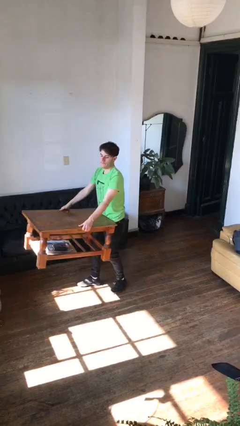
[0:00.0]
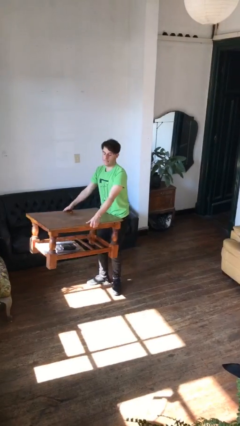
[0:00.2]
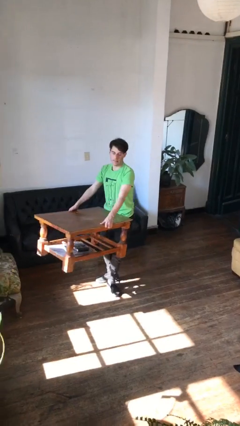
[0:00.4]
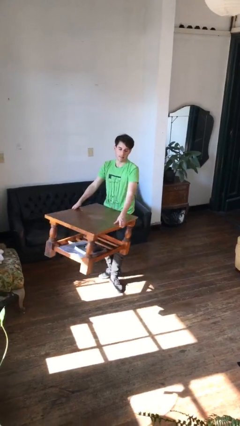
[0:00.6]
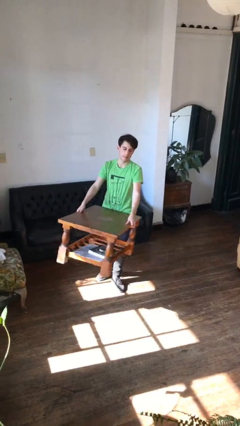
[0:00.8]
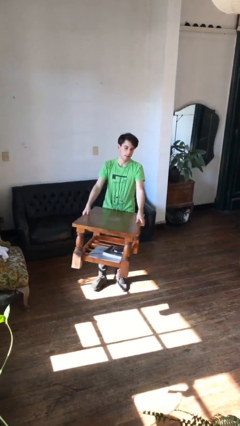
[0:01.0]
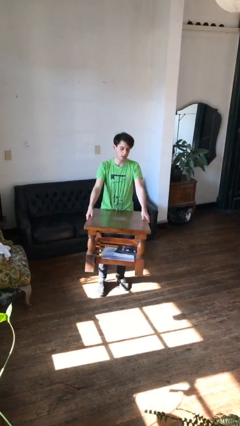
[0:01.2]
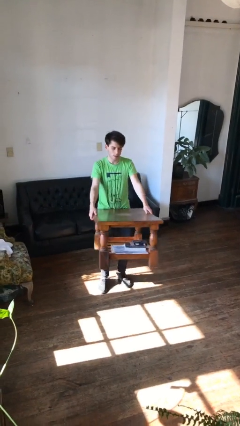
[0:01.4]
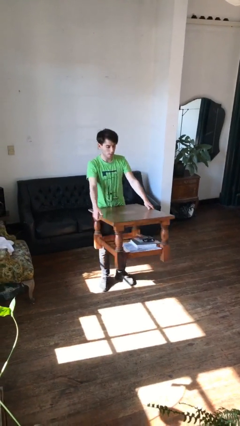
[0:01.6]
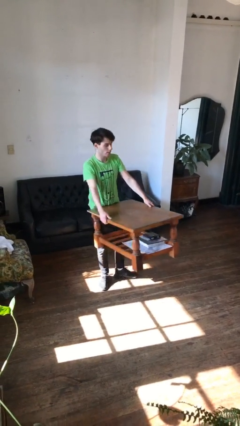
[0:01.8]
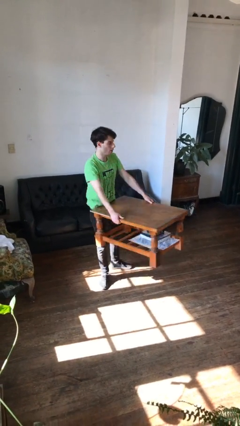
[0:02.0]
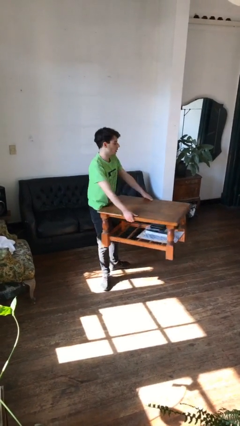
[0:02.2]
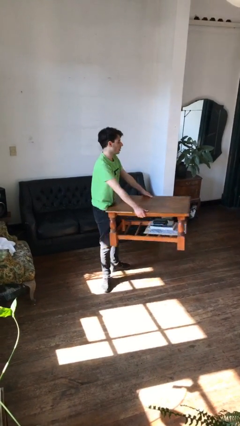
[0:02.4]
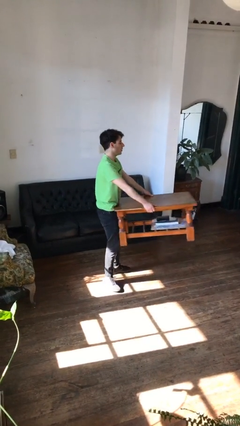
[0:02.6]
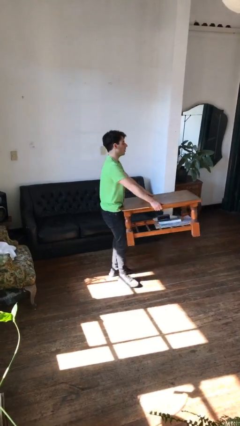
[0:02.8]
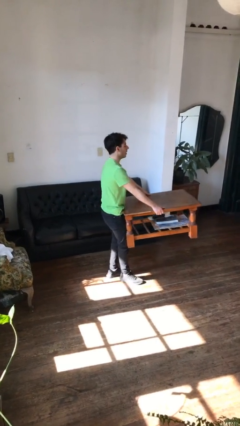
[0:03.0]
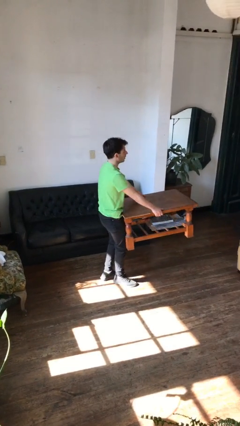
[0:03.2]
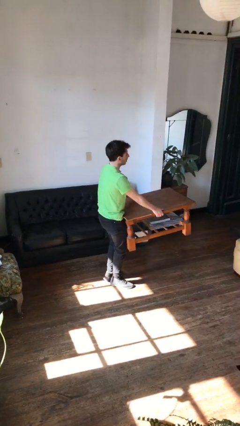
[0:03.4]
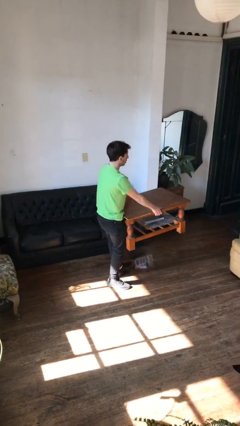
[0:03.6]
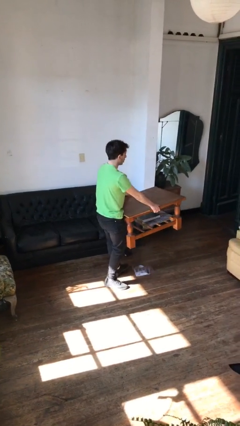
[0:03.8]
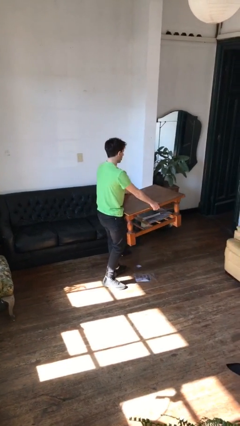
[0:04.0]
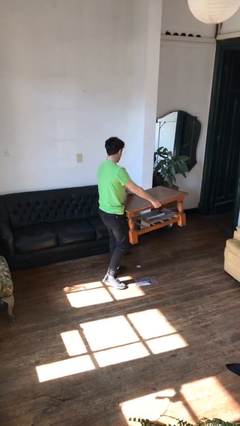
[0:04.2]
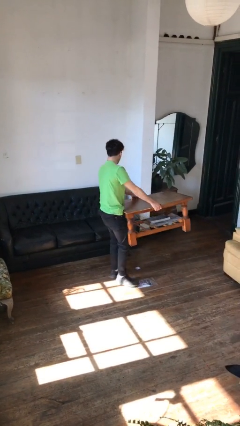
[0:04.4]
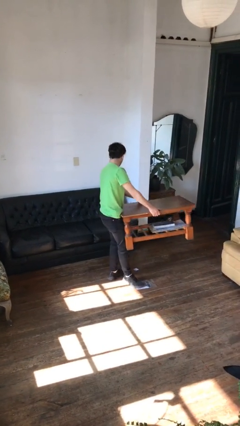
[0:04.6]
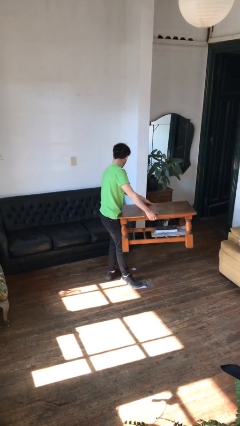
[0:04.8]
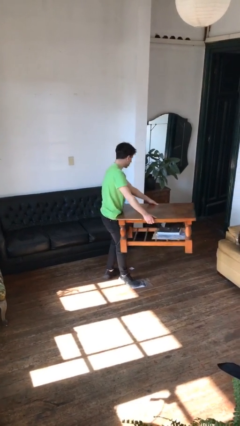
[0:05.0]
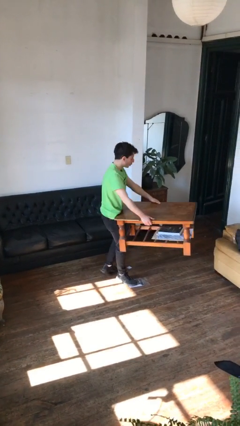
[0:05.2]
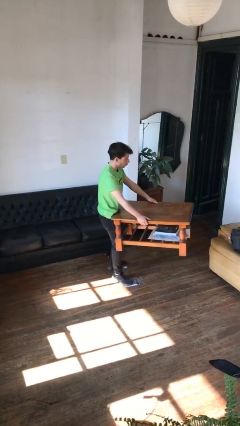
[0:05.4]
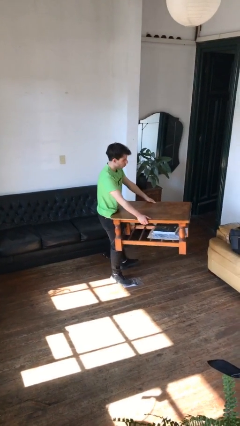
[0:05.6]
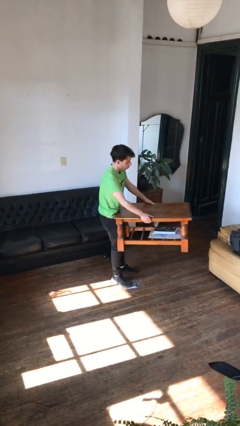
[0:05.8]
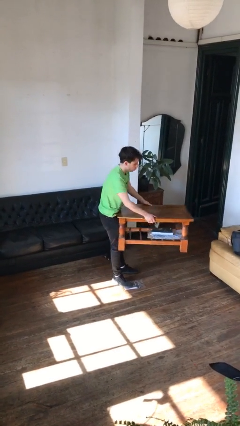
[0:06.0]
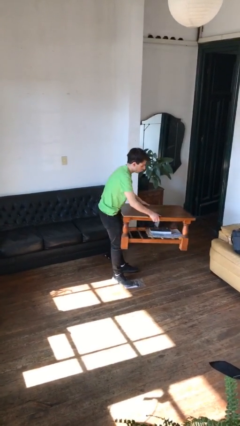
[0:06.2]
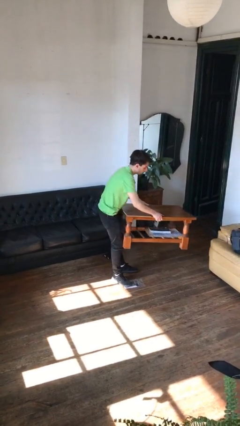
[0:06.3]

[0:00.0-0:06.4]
person carries heavy object

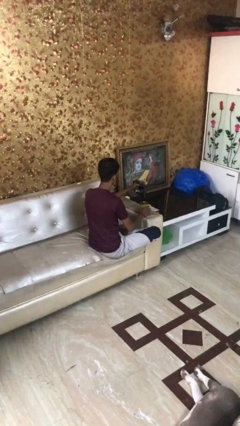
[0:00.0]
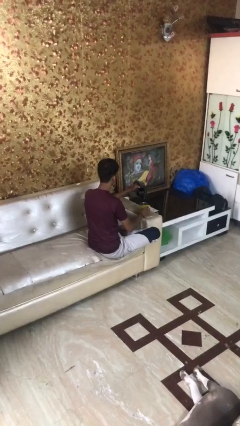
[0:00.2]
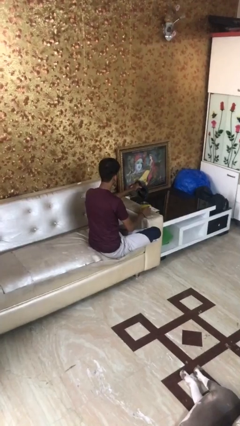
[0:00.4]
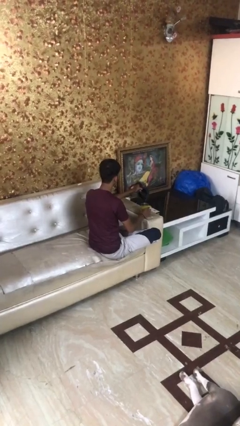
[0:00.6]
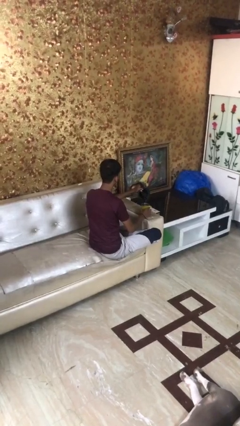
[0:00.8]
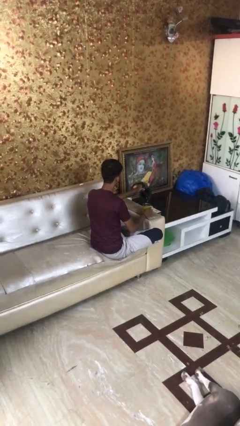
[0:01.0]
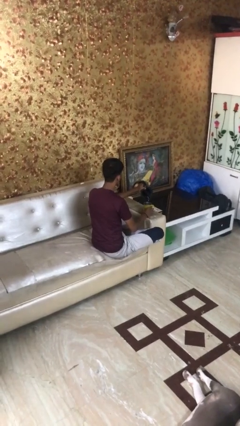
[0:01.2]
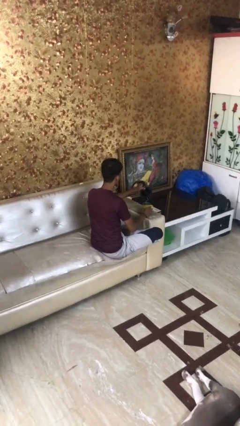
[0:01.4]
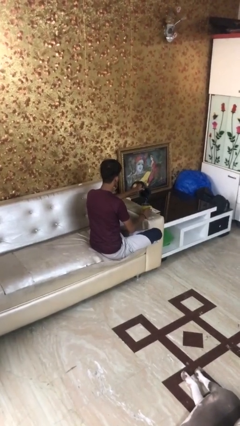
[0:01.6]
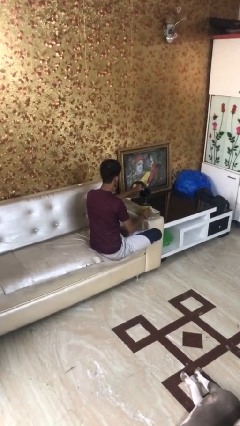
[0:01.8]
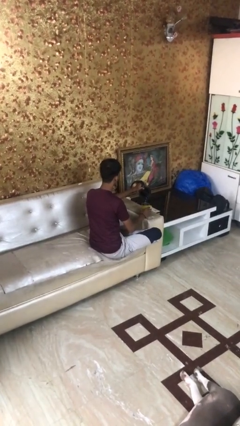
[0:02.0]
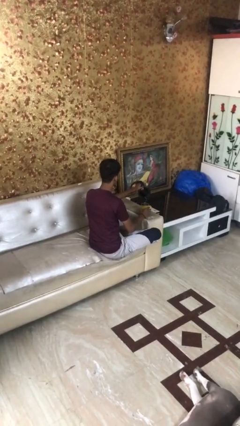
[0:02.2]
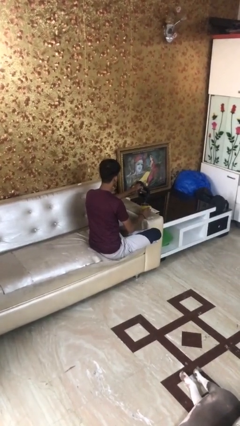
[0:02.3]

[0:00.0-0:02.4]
person pours coffee into mug

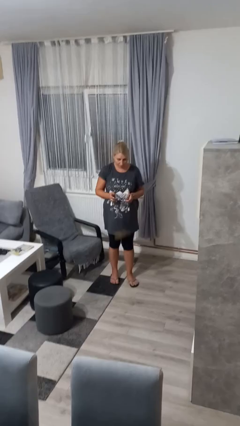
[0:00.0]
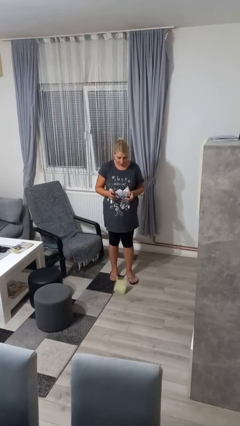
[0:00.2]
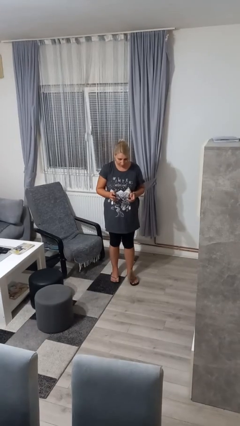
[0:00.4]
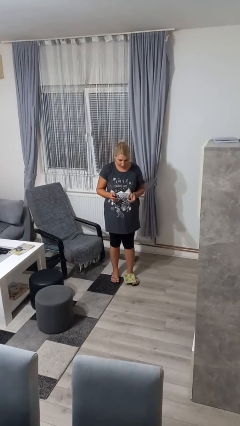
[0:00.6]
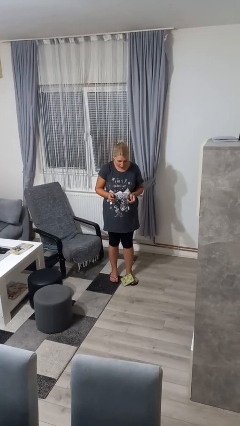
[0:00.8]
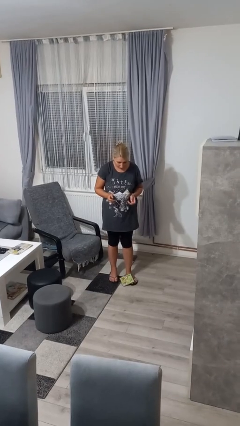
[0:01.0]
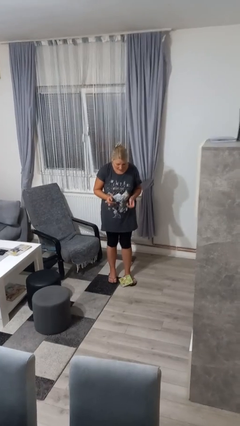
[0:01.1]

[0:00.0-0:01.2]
person drops object

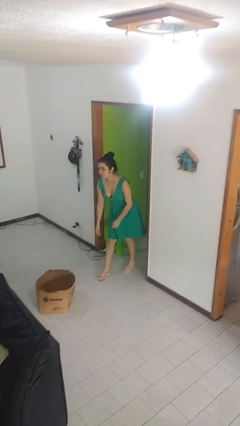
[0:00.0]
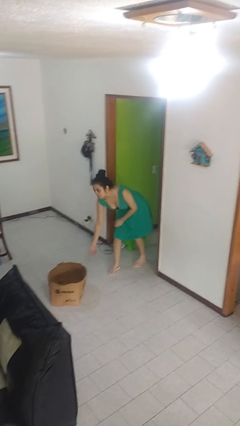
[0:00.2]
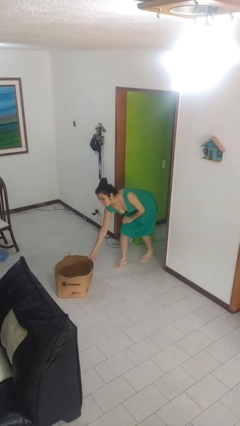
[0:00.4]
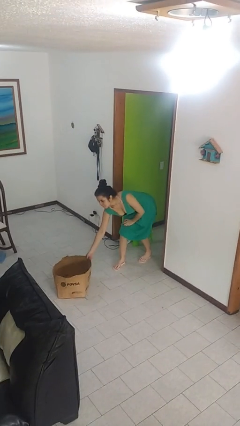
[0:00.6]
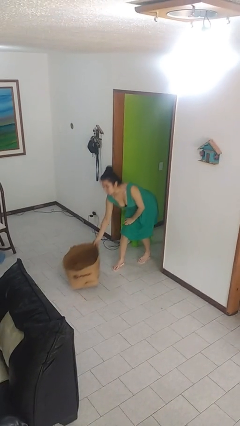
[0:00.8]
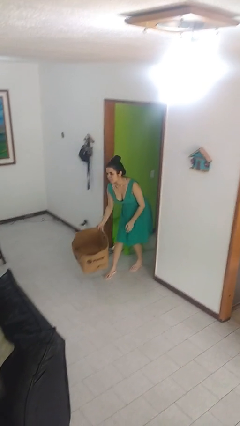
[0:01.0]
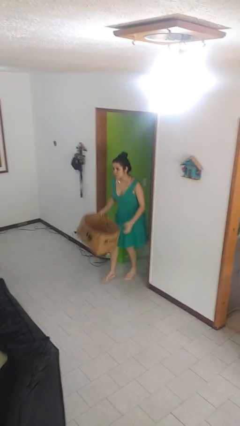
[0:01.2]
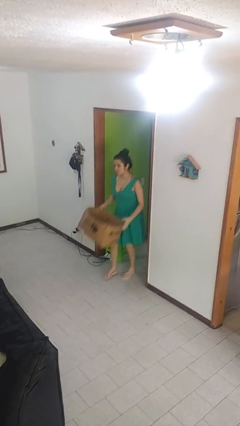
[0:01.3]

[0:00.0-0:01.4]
person picks up object from floor

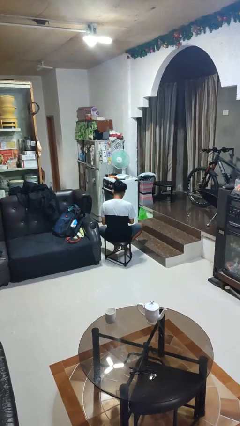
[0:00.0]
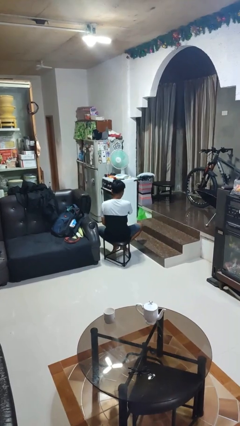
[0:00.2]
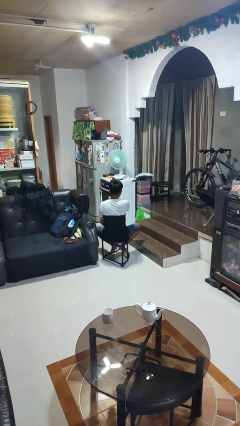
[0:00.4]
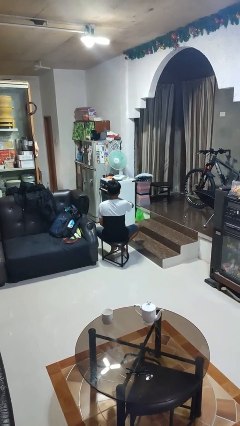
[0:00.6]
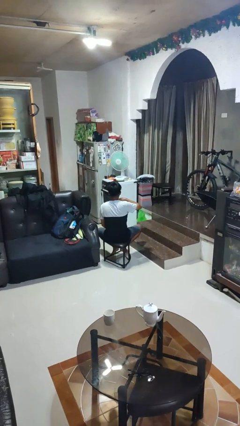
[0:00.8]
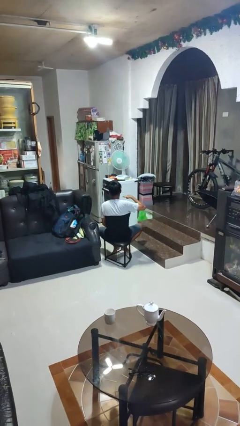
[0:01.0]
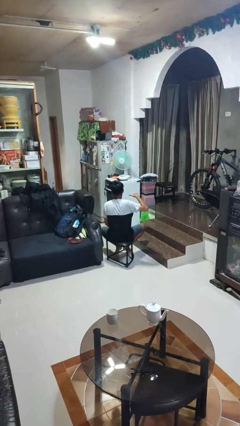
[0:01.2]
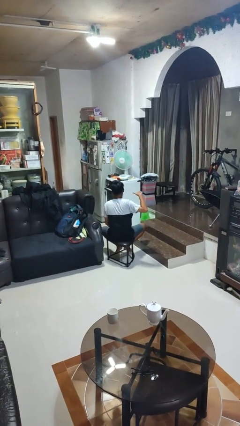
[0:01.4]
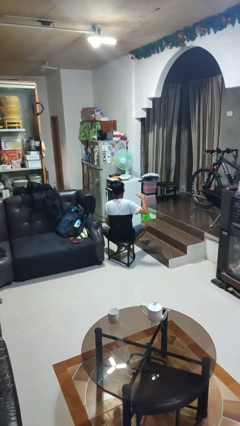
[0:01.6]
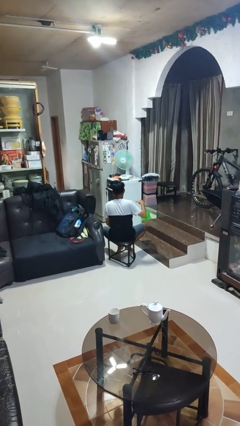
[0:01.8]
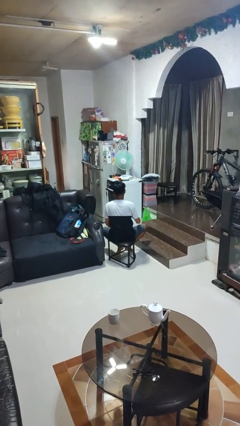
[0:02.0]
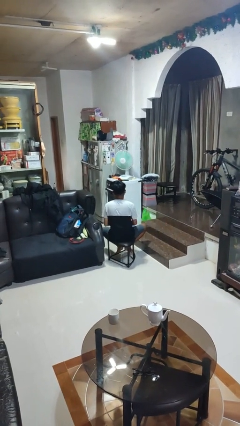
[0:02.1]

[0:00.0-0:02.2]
person gestures cut

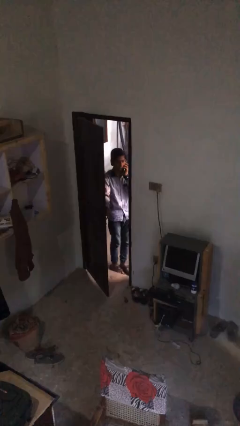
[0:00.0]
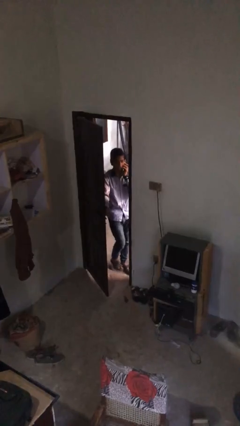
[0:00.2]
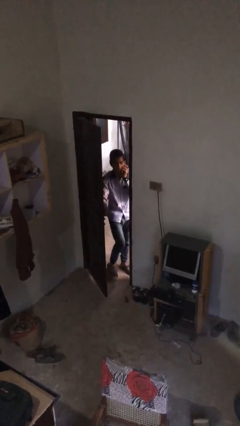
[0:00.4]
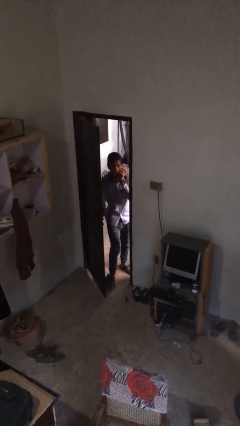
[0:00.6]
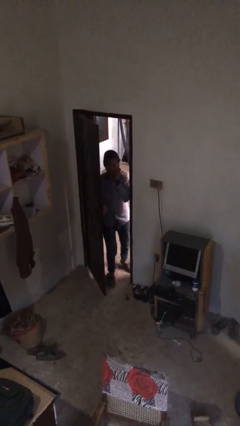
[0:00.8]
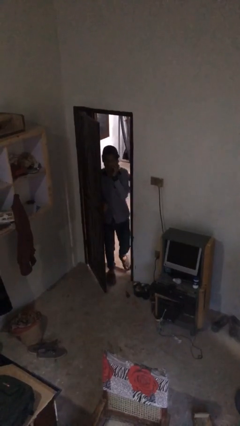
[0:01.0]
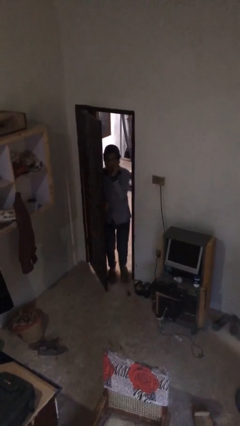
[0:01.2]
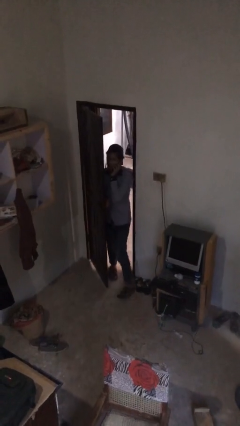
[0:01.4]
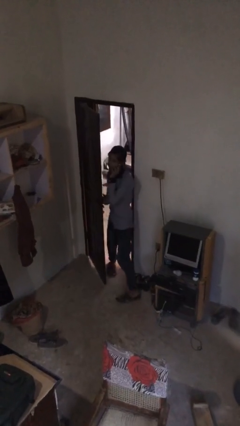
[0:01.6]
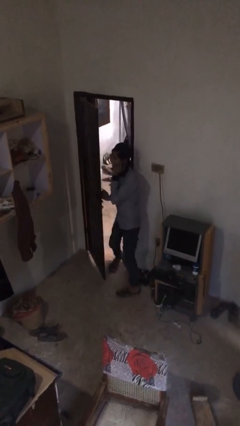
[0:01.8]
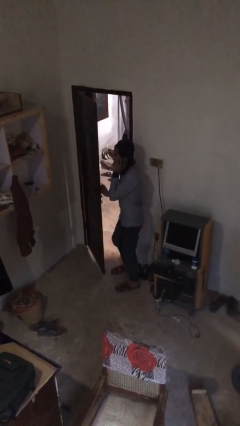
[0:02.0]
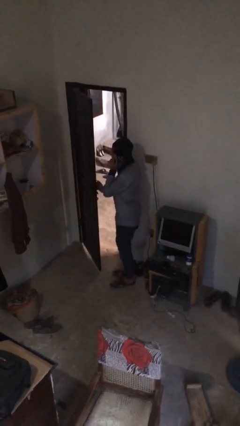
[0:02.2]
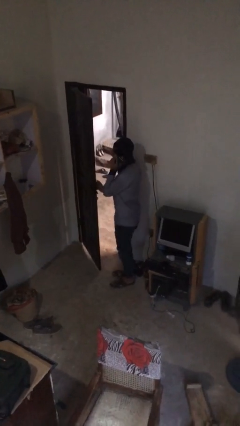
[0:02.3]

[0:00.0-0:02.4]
person enters scene through structure

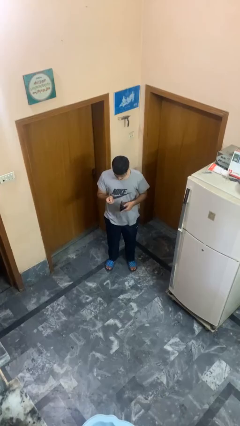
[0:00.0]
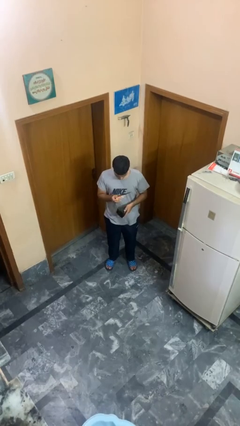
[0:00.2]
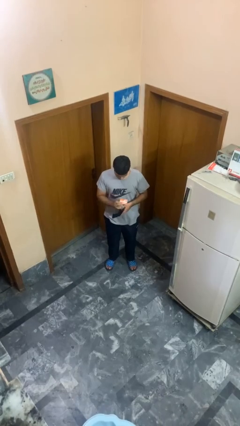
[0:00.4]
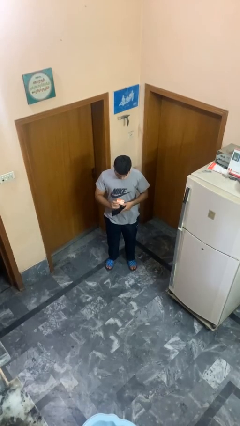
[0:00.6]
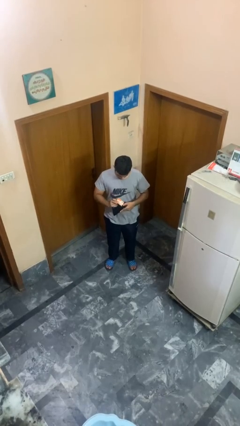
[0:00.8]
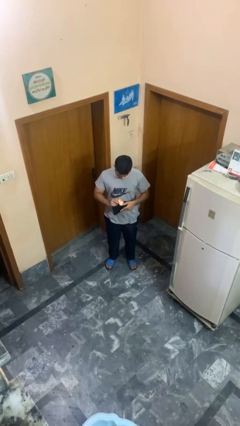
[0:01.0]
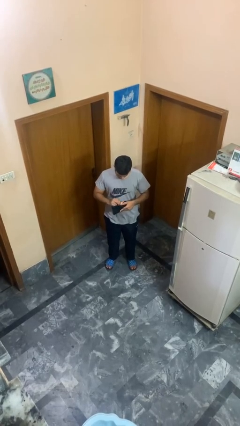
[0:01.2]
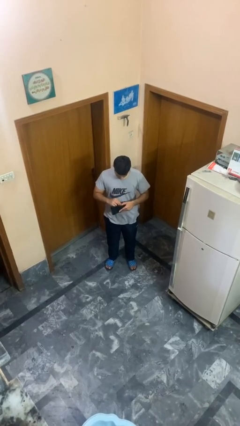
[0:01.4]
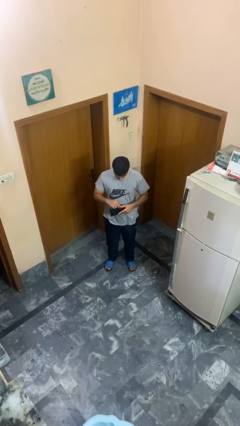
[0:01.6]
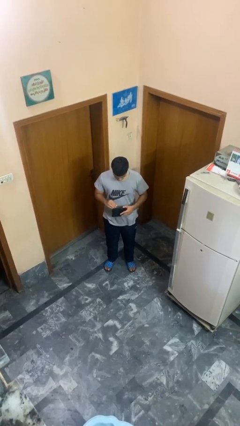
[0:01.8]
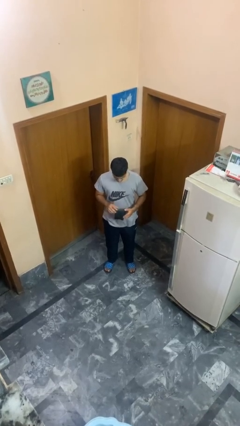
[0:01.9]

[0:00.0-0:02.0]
person puts object into purse
